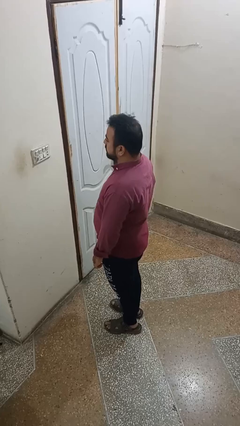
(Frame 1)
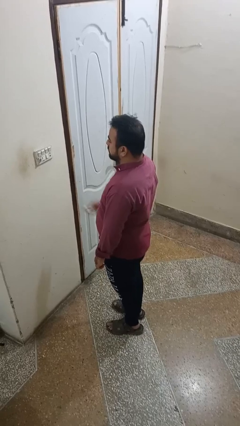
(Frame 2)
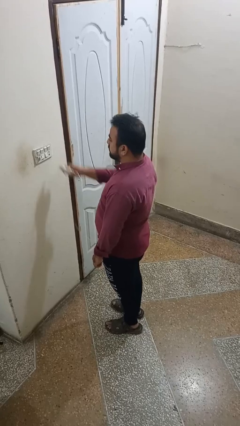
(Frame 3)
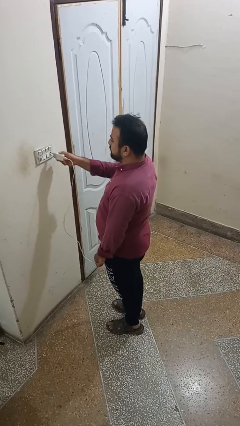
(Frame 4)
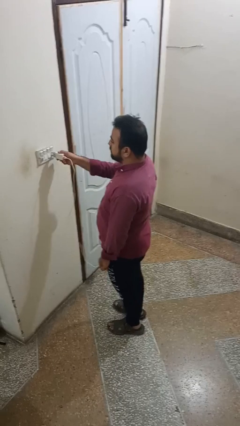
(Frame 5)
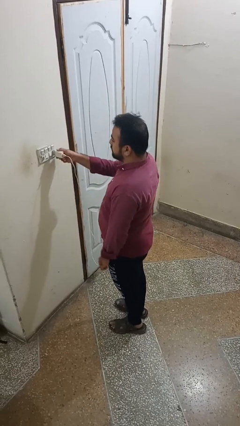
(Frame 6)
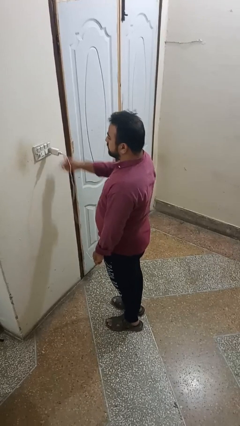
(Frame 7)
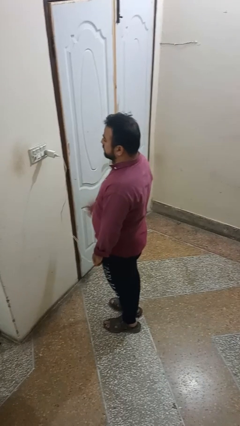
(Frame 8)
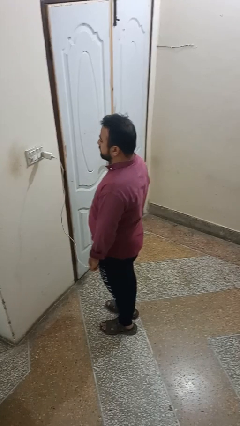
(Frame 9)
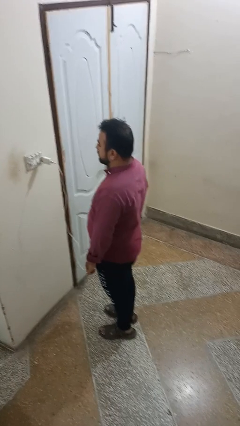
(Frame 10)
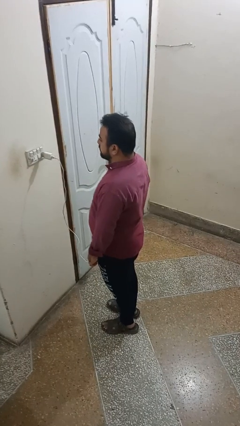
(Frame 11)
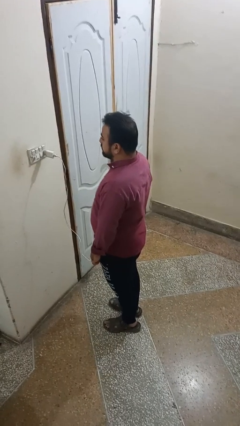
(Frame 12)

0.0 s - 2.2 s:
person plugs into electrical socket

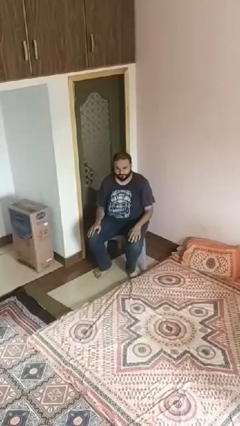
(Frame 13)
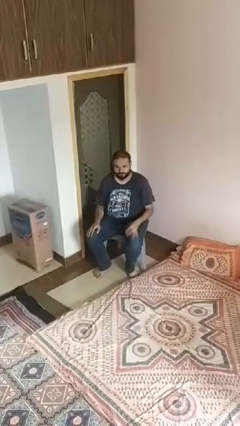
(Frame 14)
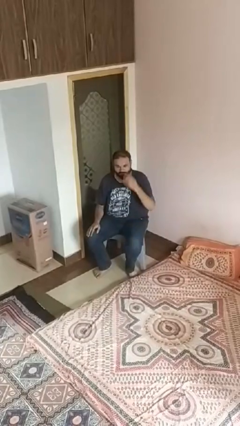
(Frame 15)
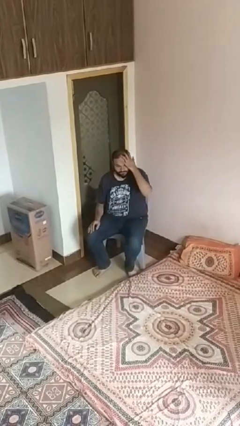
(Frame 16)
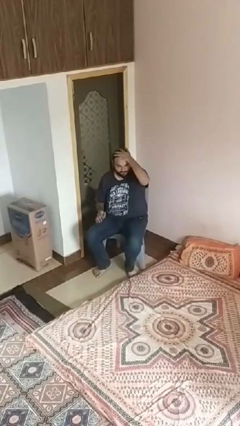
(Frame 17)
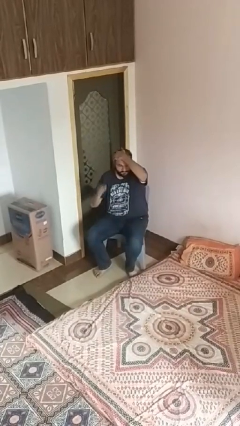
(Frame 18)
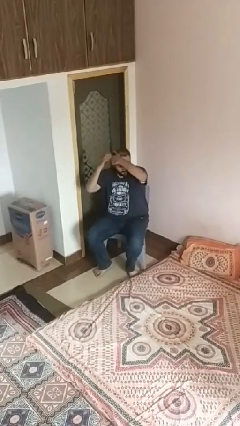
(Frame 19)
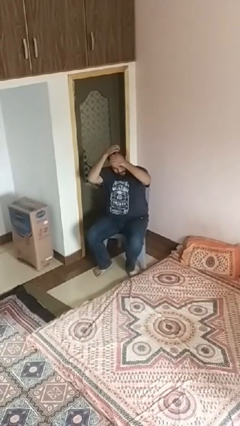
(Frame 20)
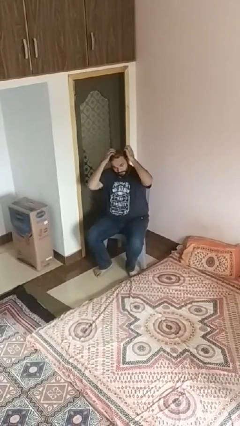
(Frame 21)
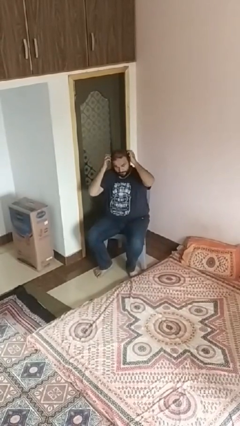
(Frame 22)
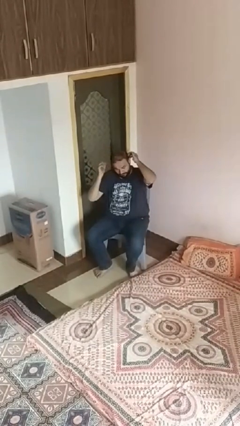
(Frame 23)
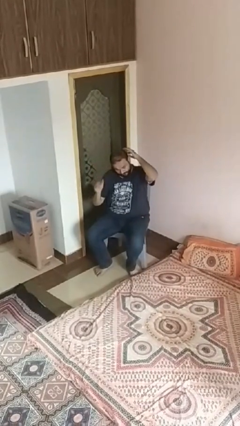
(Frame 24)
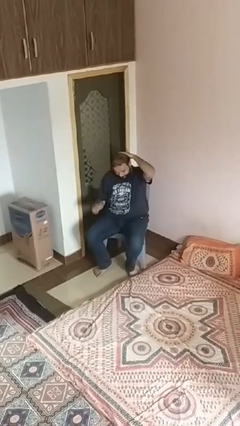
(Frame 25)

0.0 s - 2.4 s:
person strokes hair

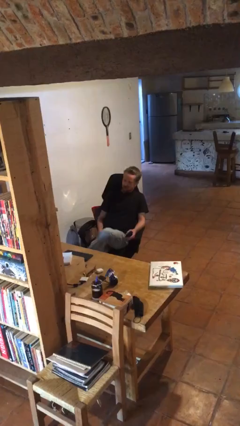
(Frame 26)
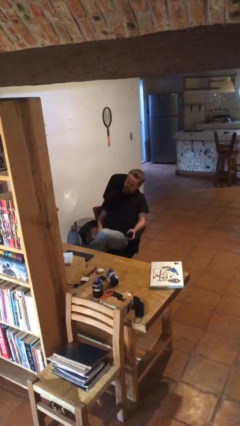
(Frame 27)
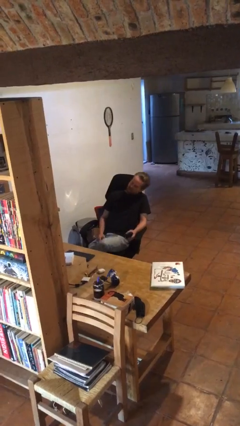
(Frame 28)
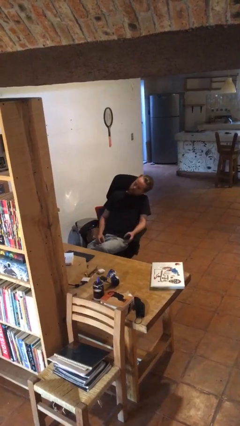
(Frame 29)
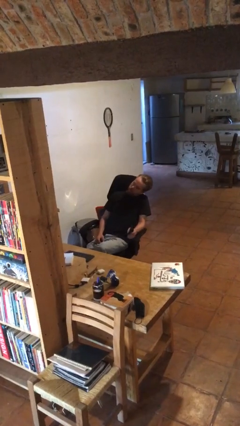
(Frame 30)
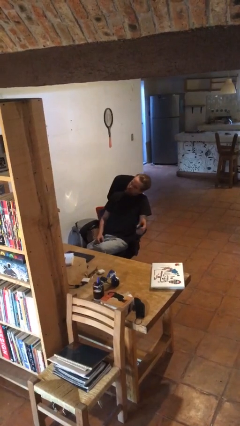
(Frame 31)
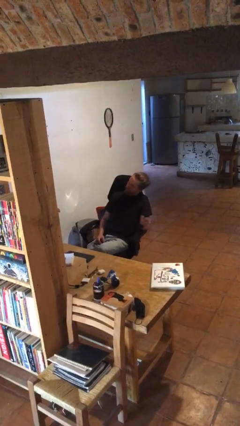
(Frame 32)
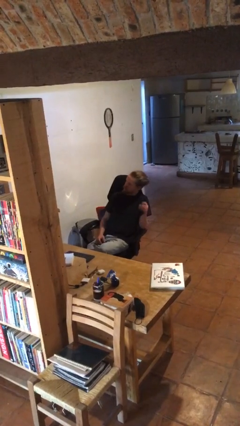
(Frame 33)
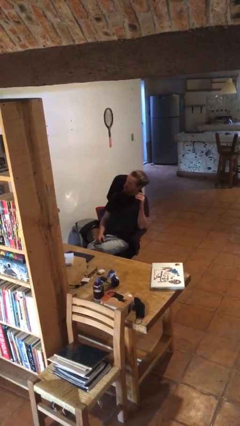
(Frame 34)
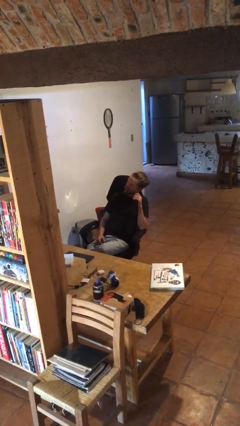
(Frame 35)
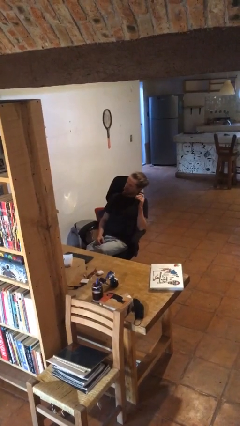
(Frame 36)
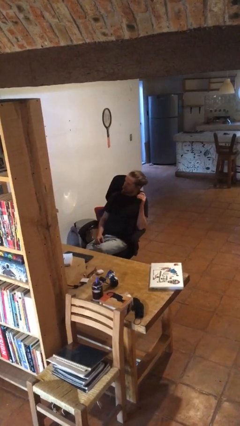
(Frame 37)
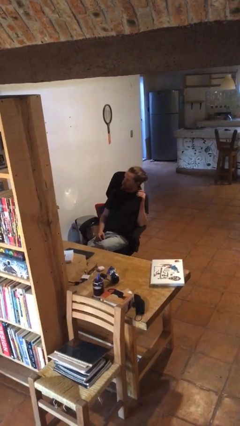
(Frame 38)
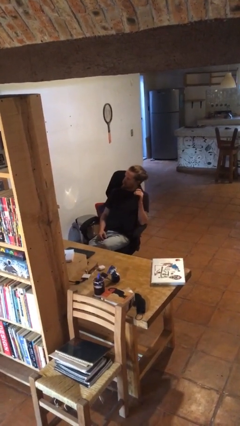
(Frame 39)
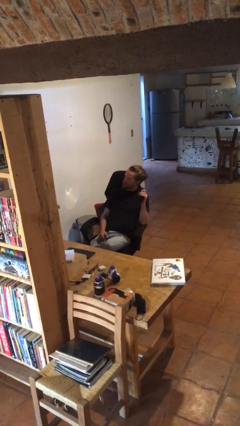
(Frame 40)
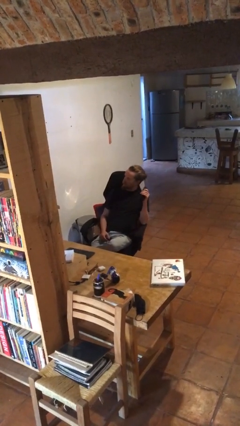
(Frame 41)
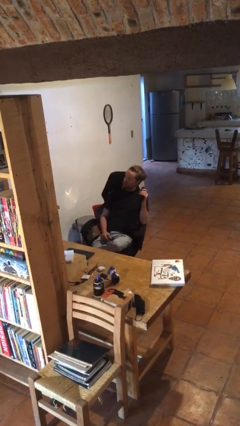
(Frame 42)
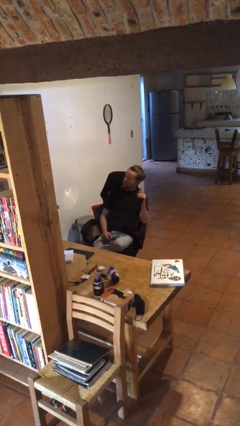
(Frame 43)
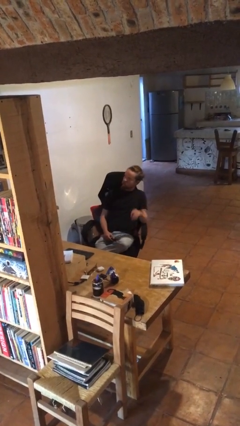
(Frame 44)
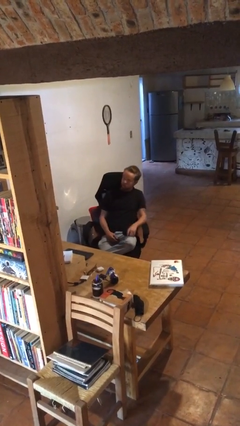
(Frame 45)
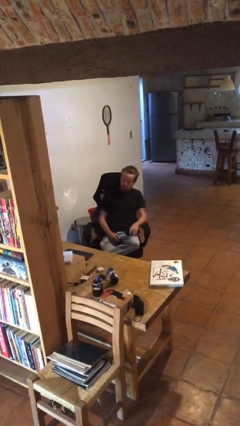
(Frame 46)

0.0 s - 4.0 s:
person squeezes object

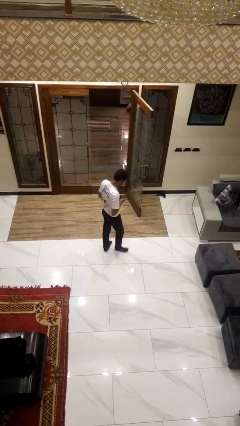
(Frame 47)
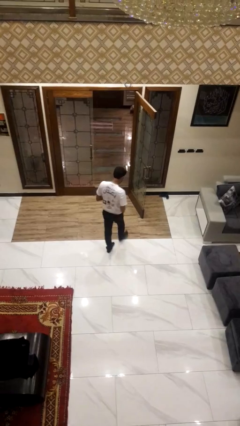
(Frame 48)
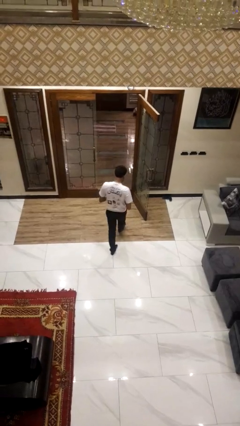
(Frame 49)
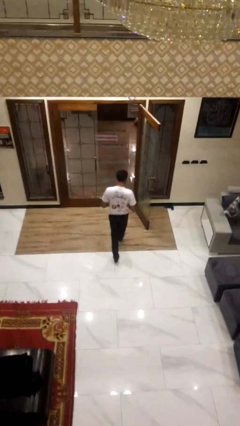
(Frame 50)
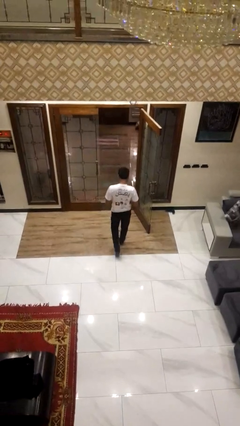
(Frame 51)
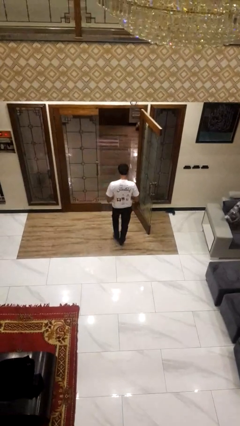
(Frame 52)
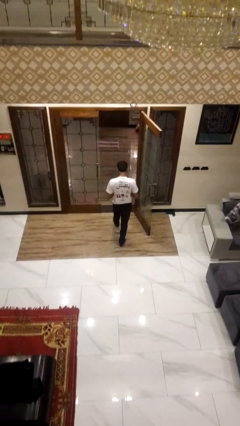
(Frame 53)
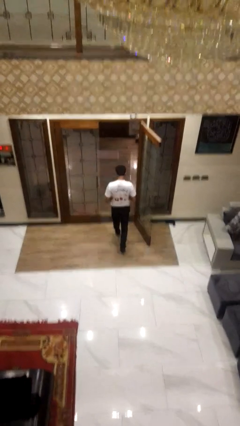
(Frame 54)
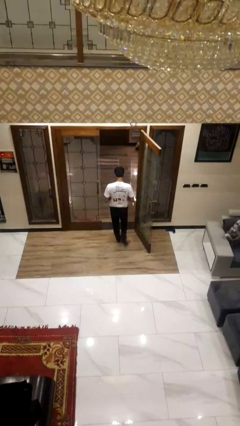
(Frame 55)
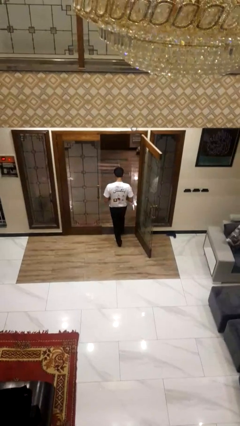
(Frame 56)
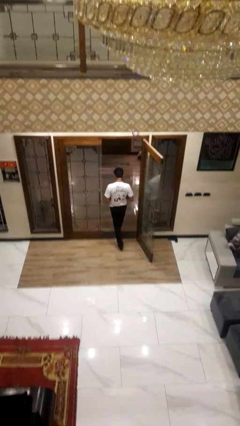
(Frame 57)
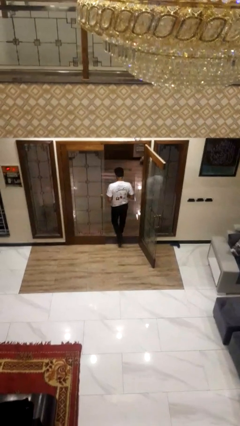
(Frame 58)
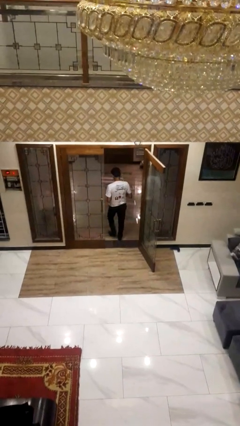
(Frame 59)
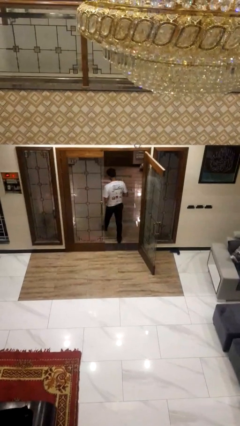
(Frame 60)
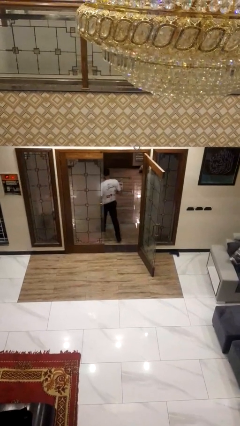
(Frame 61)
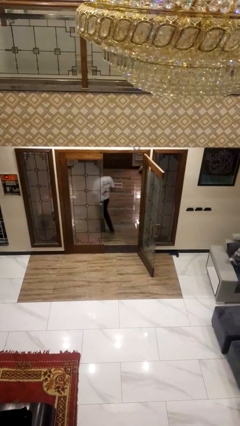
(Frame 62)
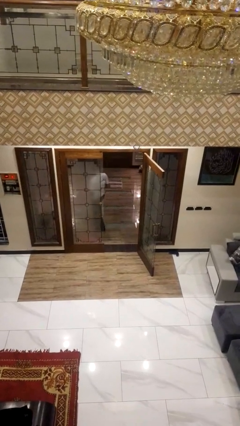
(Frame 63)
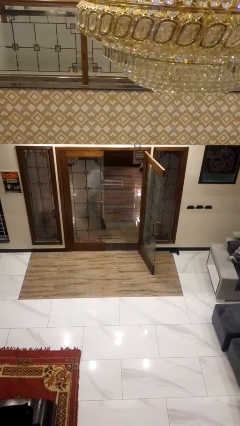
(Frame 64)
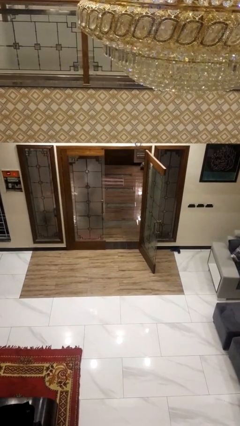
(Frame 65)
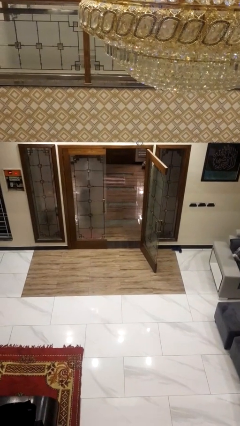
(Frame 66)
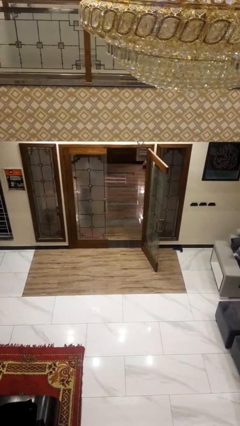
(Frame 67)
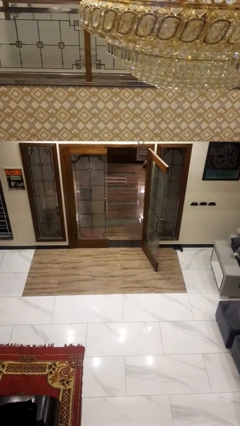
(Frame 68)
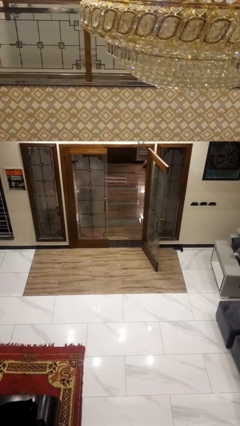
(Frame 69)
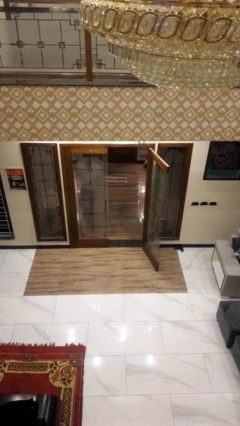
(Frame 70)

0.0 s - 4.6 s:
person exits scene through structure

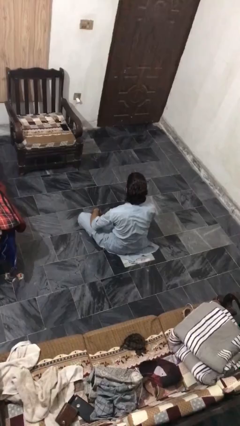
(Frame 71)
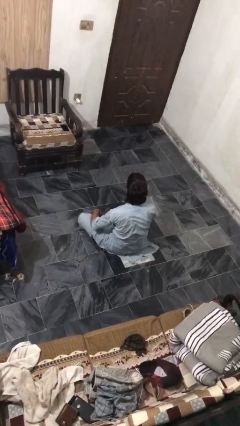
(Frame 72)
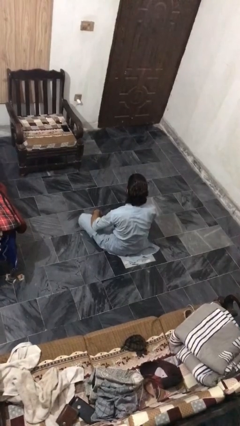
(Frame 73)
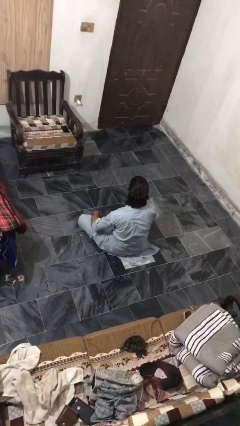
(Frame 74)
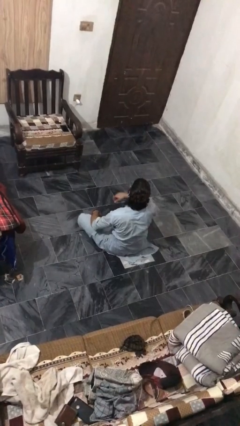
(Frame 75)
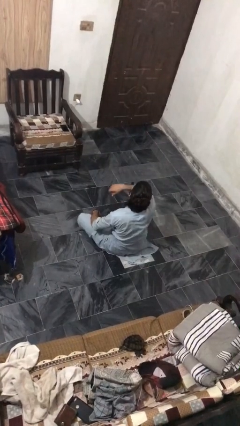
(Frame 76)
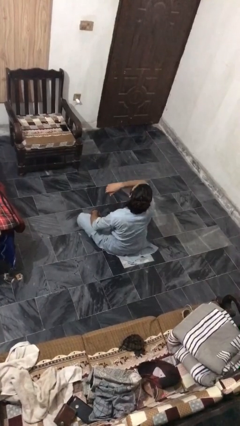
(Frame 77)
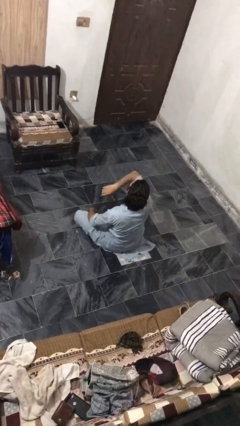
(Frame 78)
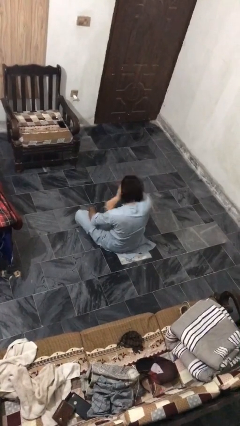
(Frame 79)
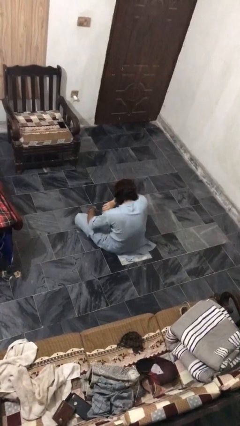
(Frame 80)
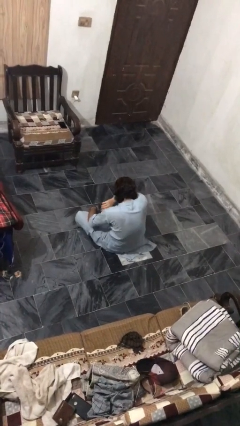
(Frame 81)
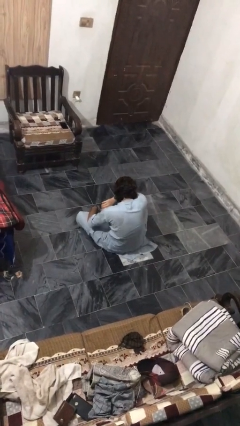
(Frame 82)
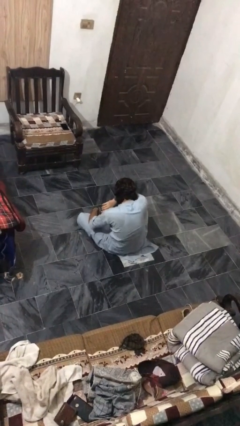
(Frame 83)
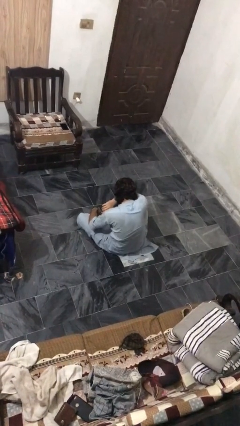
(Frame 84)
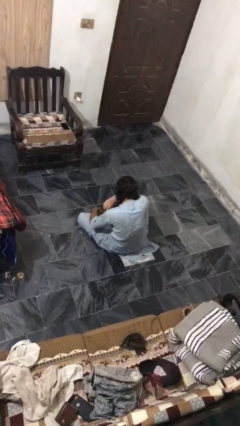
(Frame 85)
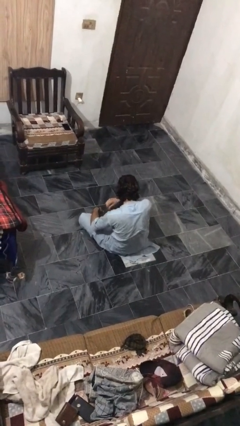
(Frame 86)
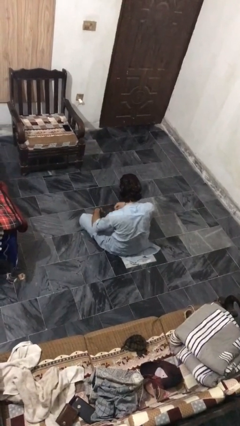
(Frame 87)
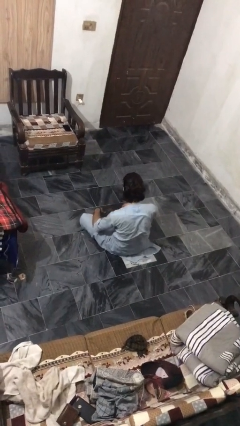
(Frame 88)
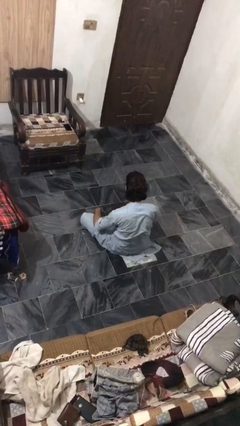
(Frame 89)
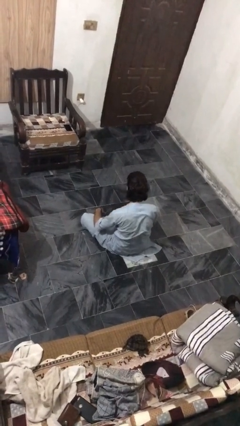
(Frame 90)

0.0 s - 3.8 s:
person sneezes into arm

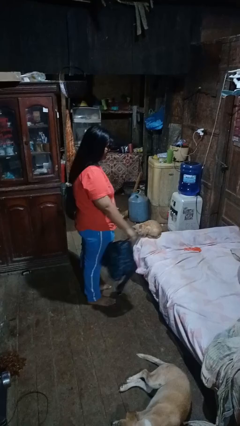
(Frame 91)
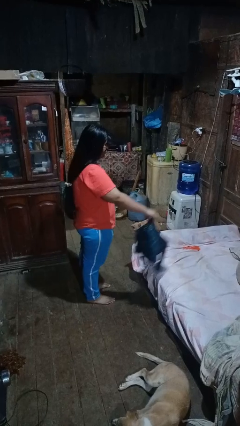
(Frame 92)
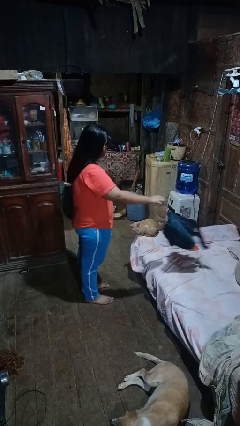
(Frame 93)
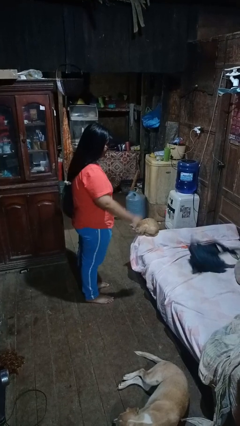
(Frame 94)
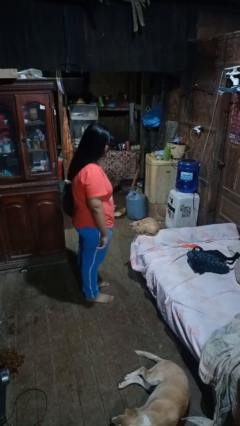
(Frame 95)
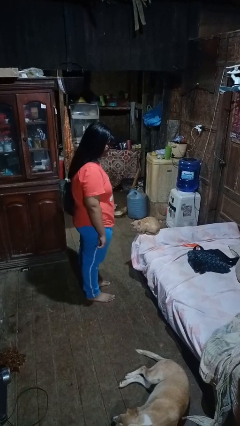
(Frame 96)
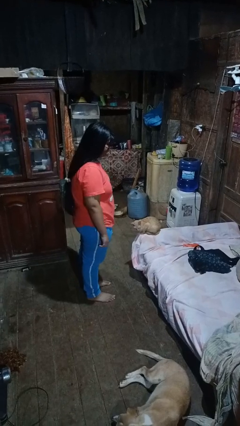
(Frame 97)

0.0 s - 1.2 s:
person throws object on bed
